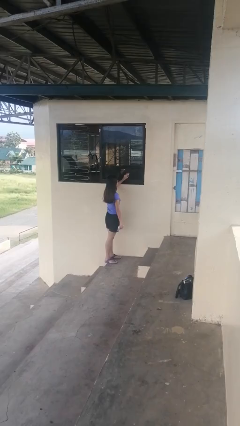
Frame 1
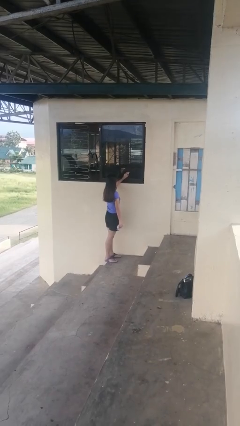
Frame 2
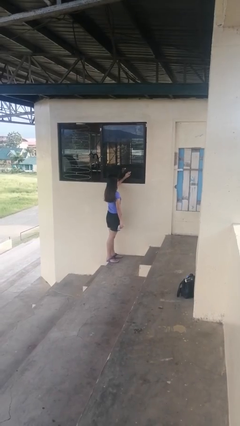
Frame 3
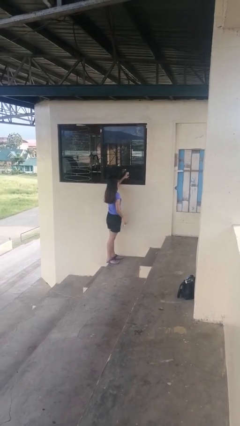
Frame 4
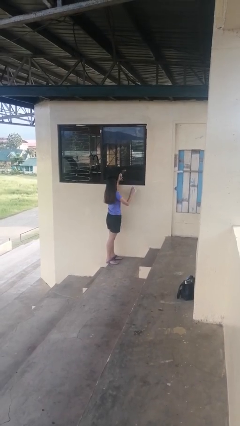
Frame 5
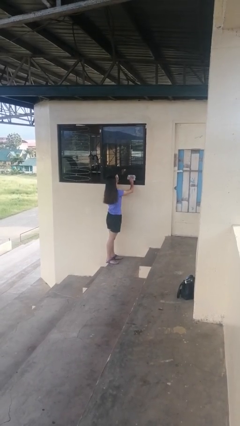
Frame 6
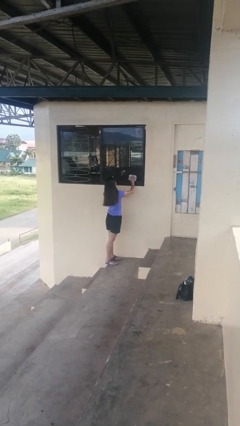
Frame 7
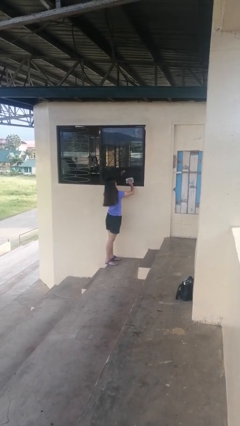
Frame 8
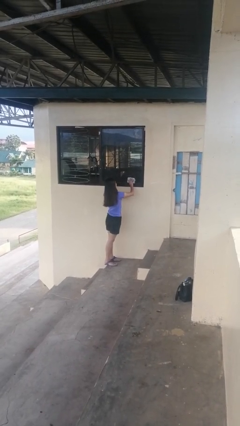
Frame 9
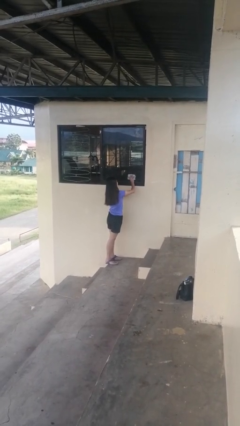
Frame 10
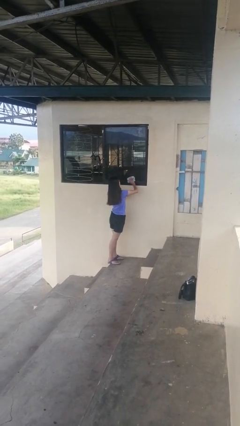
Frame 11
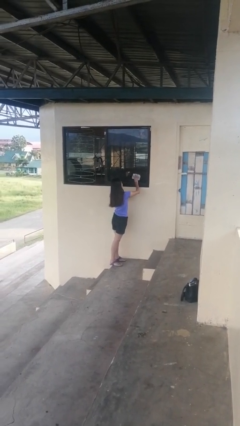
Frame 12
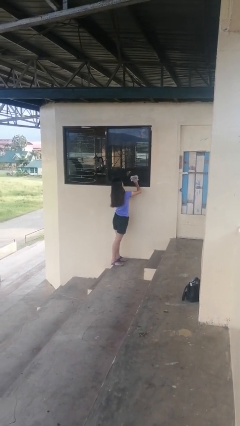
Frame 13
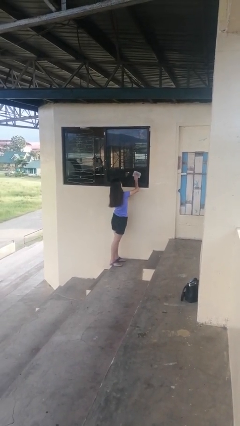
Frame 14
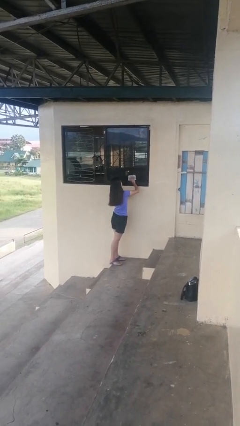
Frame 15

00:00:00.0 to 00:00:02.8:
person washes window

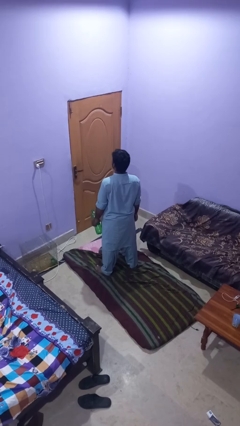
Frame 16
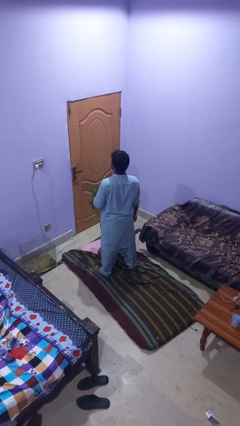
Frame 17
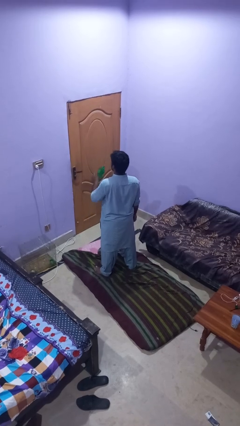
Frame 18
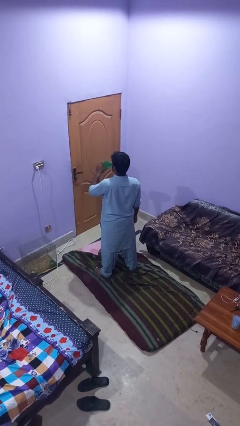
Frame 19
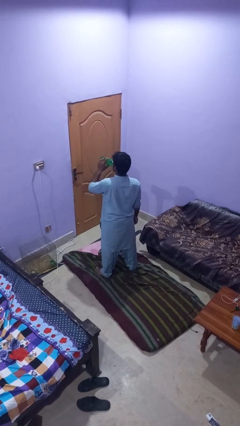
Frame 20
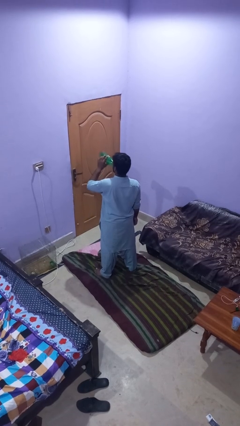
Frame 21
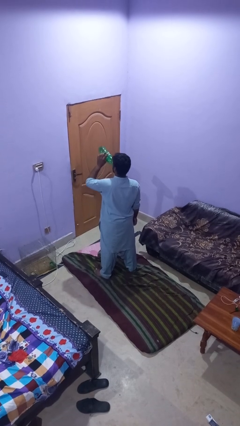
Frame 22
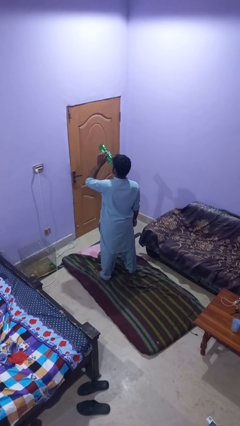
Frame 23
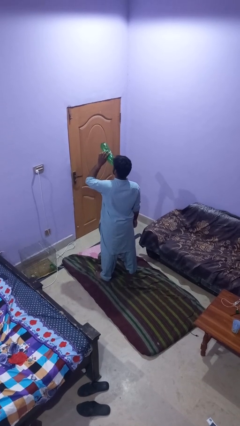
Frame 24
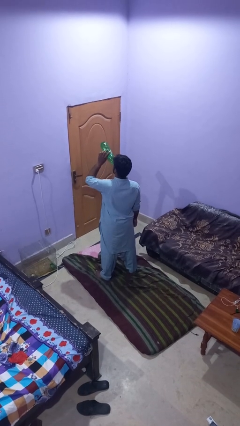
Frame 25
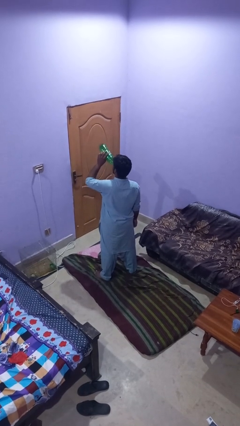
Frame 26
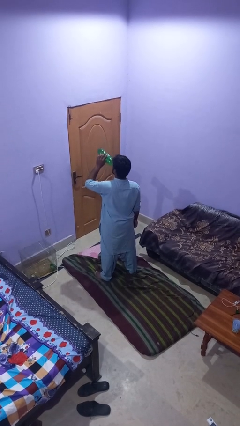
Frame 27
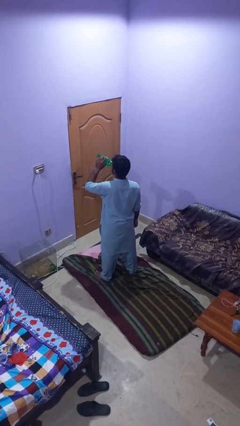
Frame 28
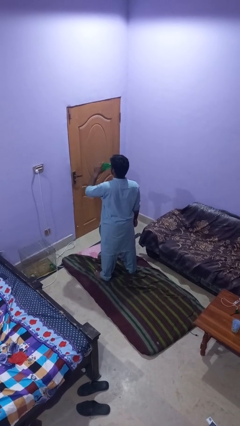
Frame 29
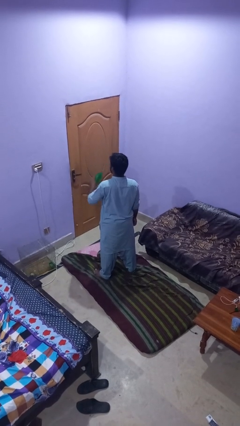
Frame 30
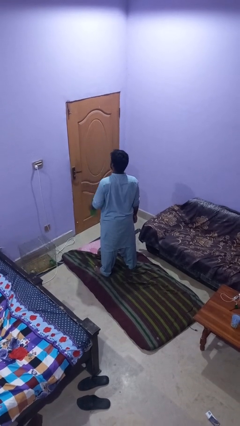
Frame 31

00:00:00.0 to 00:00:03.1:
person drinks from bottle

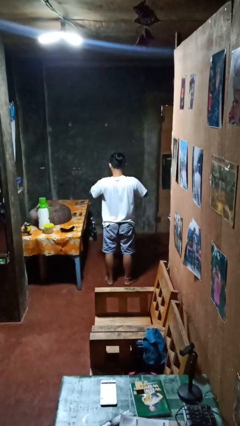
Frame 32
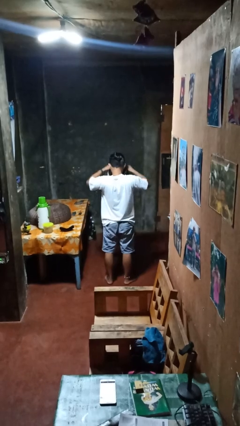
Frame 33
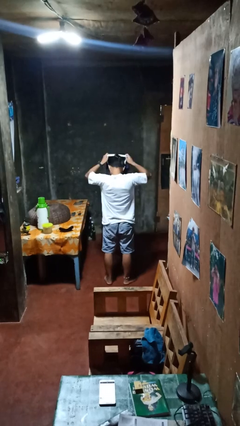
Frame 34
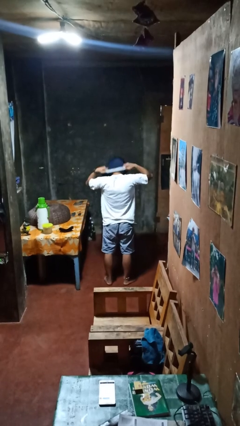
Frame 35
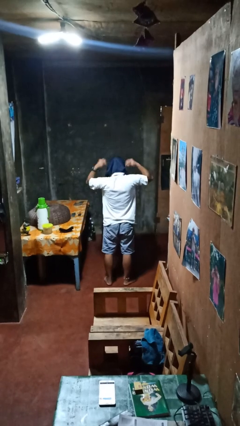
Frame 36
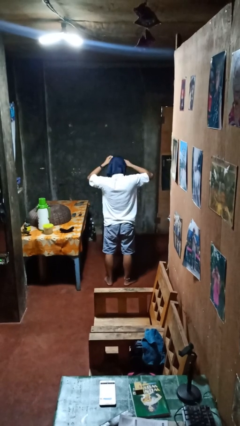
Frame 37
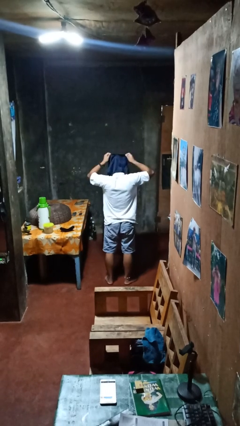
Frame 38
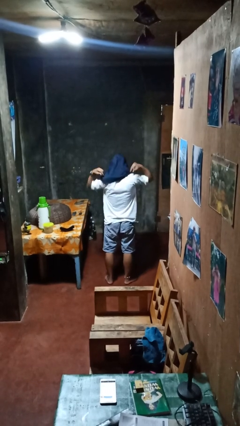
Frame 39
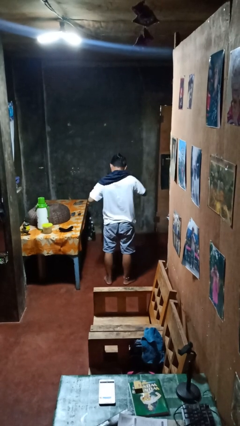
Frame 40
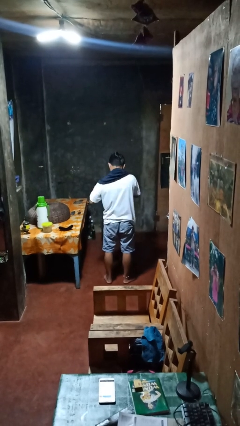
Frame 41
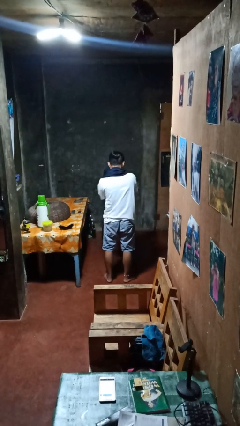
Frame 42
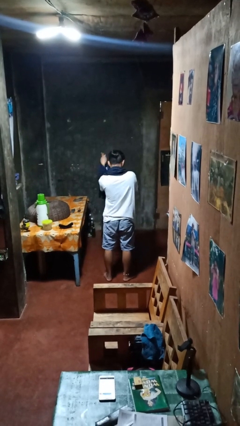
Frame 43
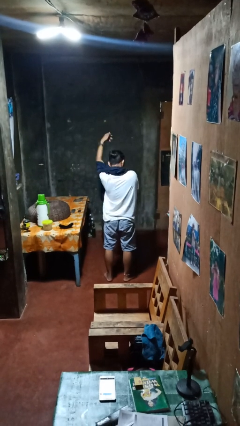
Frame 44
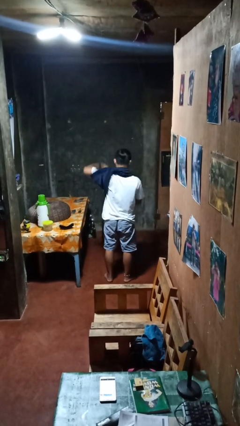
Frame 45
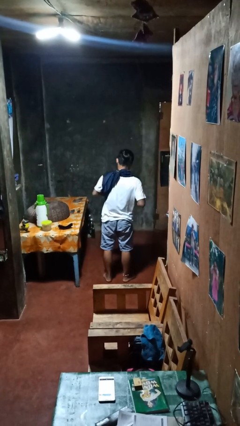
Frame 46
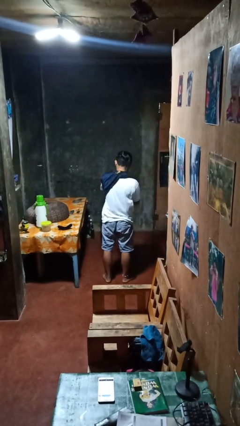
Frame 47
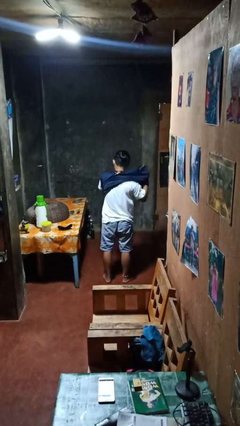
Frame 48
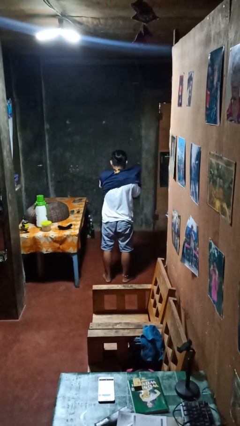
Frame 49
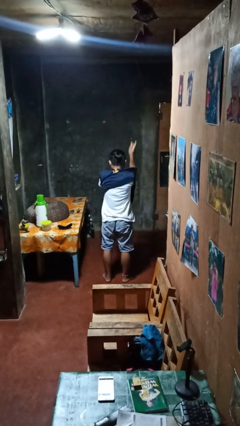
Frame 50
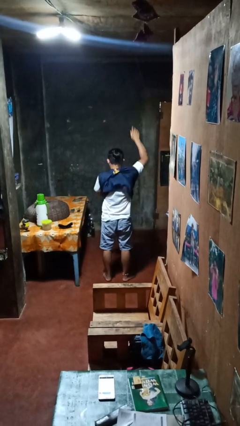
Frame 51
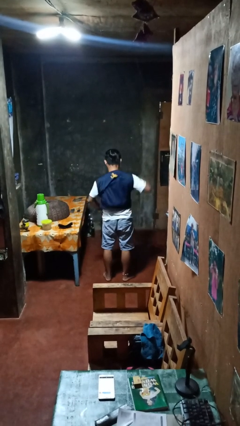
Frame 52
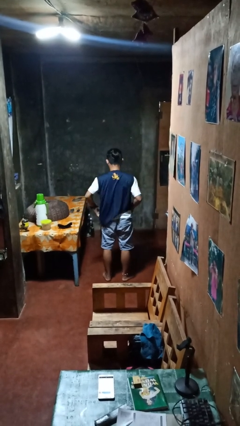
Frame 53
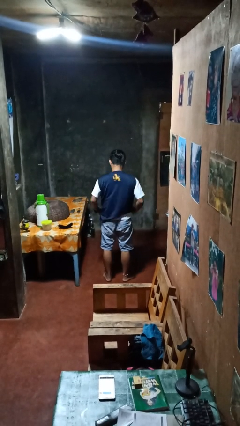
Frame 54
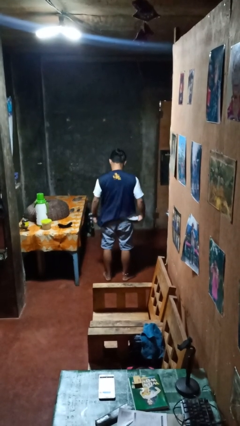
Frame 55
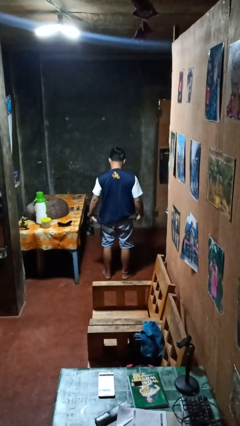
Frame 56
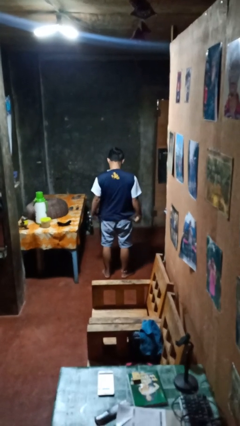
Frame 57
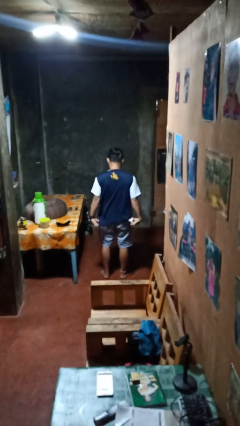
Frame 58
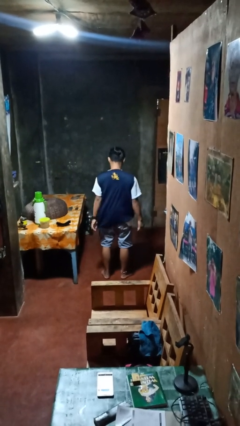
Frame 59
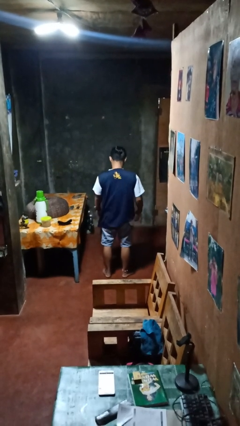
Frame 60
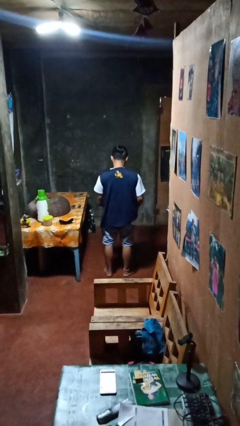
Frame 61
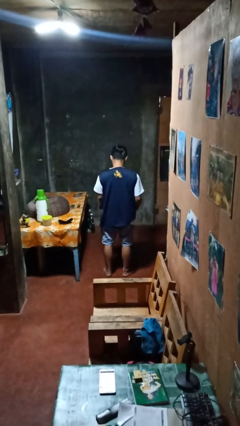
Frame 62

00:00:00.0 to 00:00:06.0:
person puts on shirt

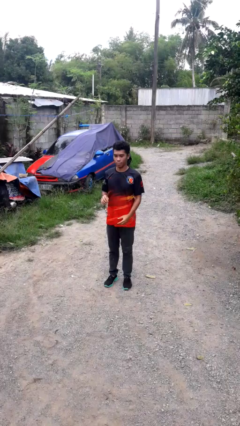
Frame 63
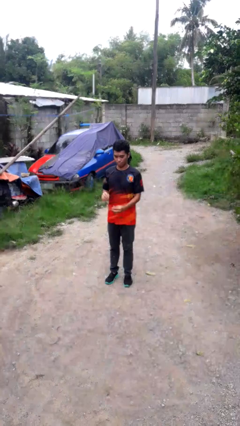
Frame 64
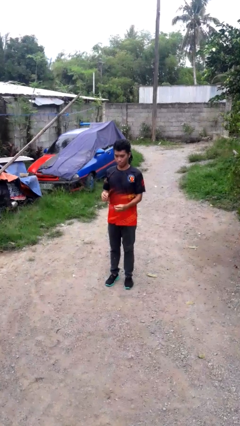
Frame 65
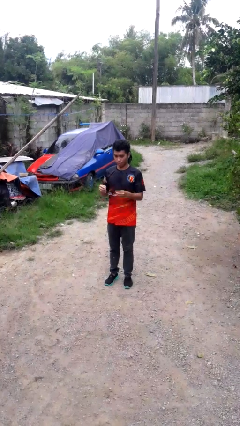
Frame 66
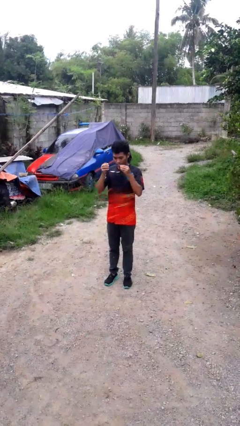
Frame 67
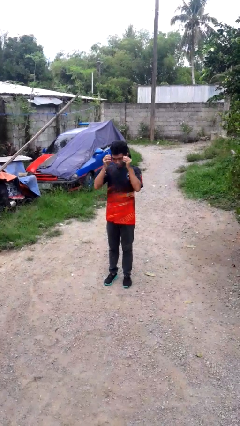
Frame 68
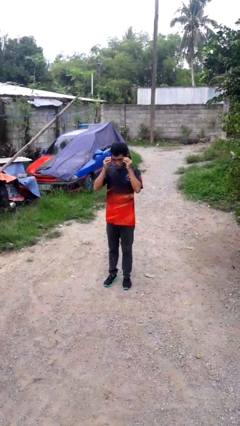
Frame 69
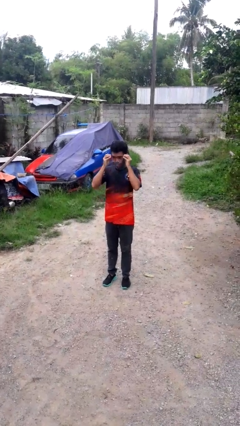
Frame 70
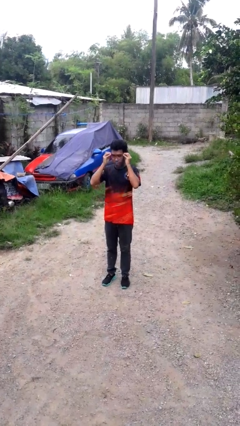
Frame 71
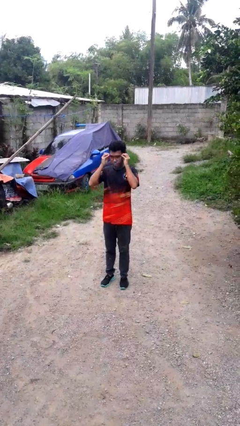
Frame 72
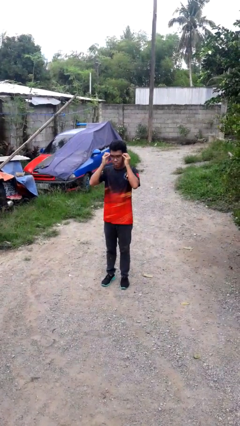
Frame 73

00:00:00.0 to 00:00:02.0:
person puts on glasses

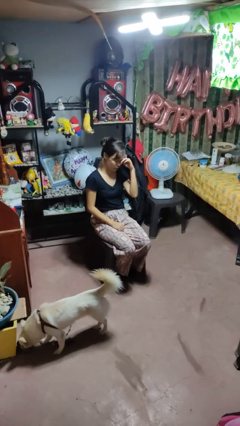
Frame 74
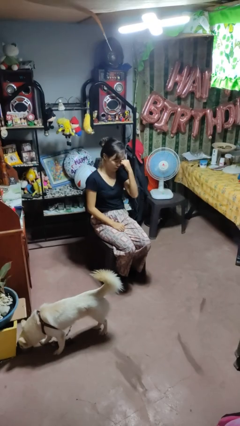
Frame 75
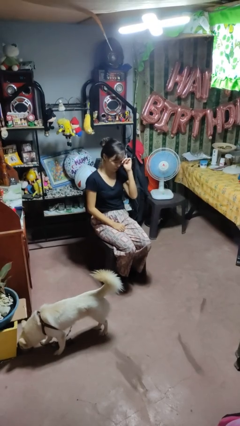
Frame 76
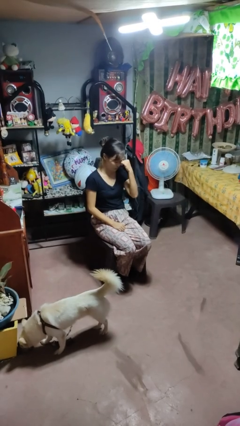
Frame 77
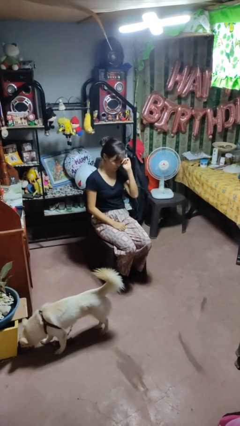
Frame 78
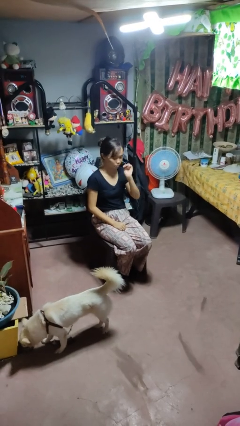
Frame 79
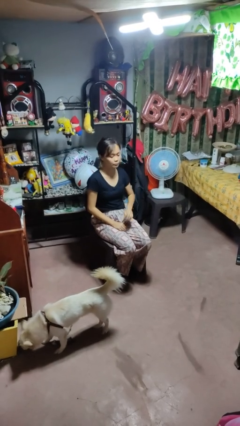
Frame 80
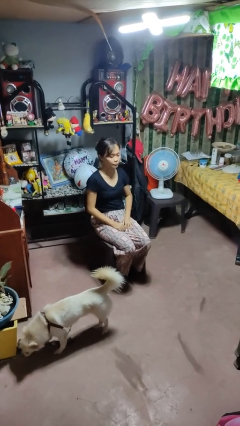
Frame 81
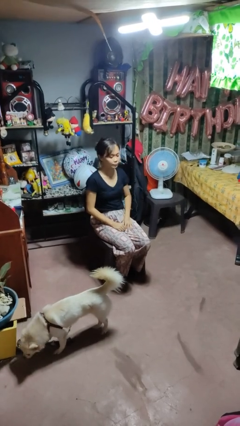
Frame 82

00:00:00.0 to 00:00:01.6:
person rubs eyes

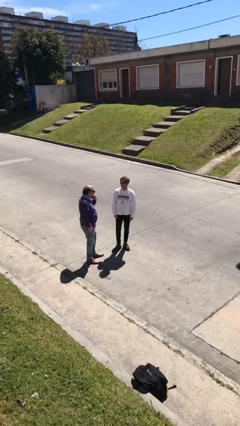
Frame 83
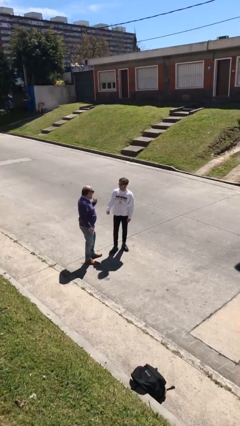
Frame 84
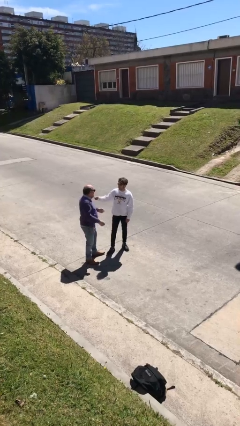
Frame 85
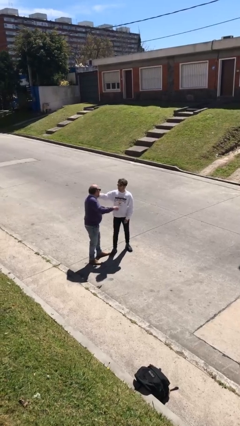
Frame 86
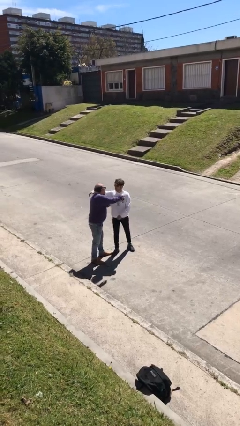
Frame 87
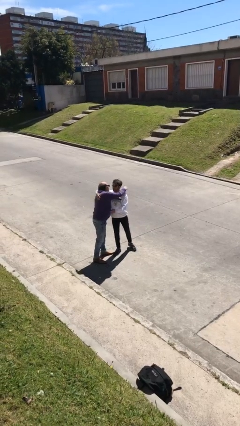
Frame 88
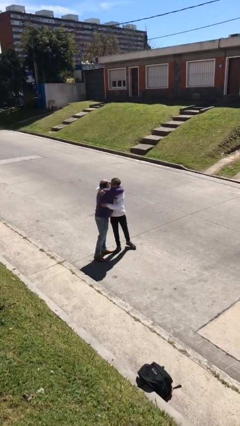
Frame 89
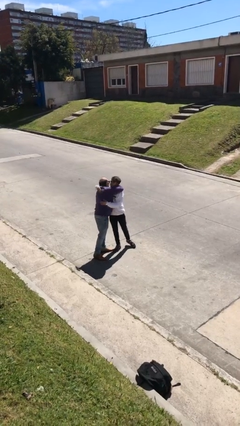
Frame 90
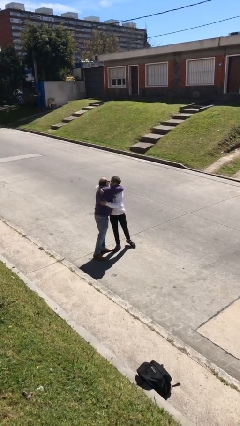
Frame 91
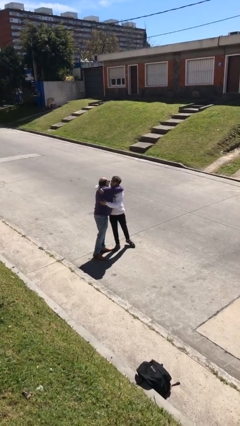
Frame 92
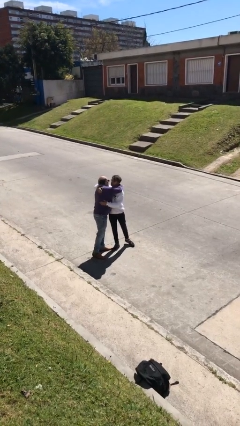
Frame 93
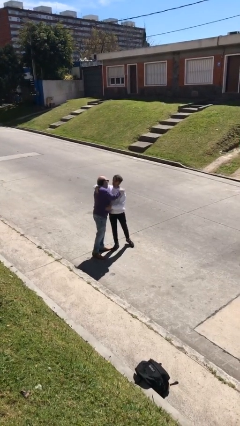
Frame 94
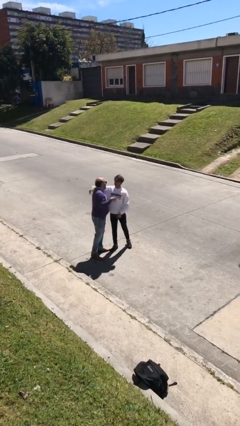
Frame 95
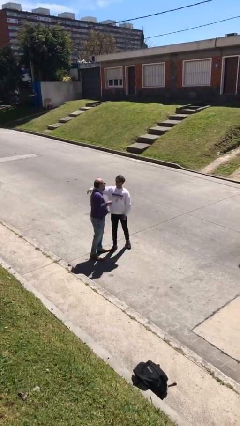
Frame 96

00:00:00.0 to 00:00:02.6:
person embraces person
